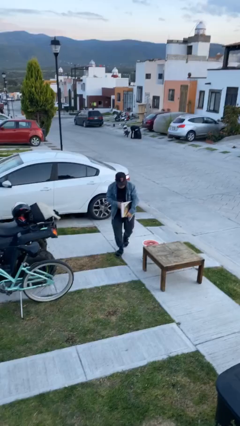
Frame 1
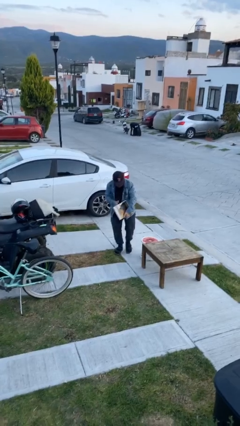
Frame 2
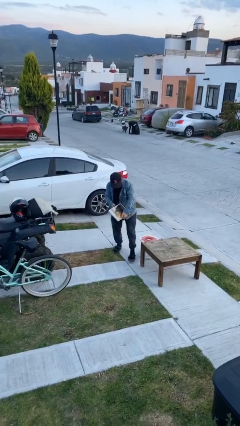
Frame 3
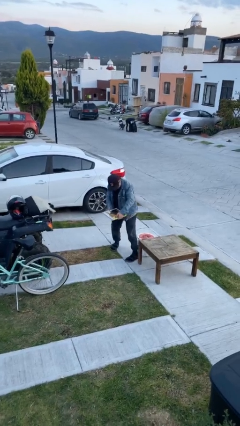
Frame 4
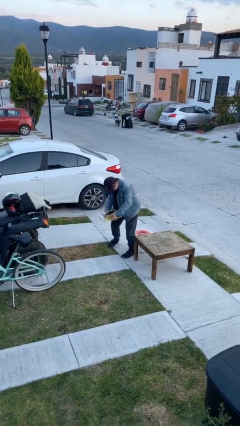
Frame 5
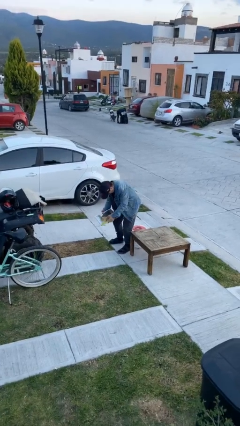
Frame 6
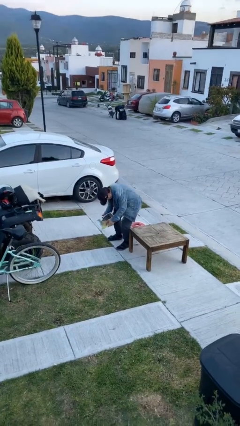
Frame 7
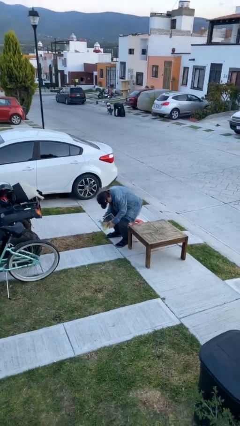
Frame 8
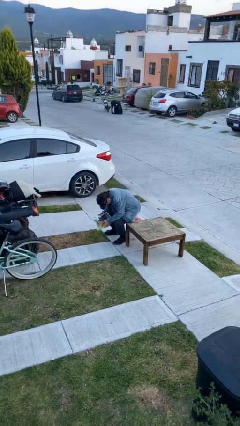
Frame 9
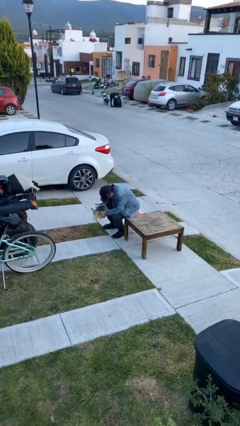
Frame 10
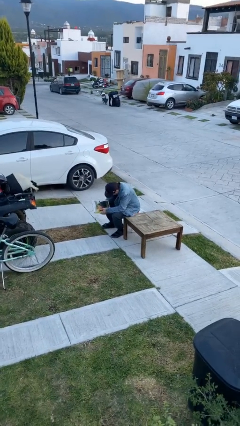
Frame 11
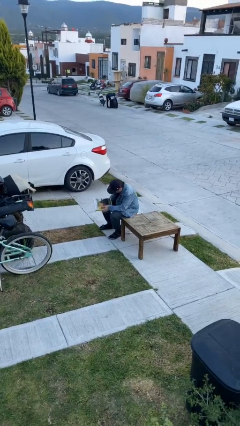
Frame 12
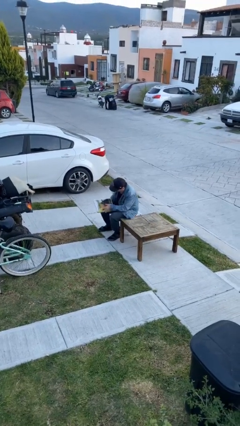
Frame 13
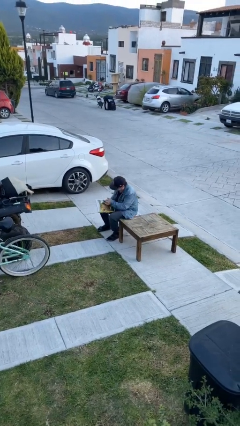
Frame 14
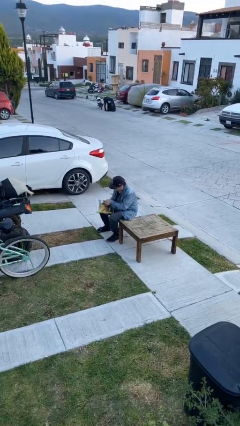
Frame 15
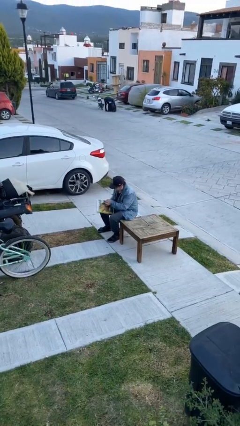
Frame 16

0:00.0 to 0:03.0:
person sits down

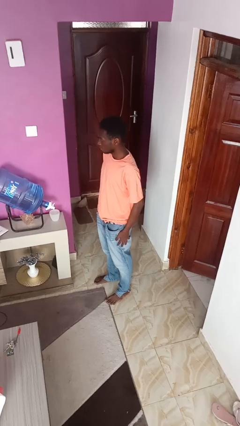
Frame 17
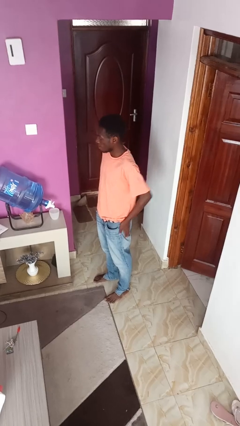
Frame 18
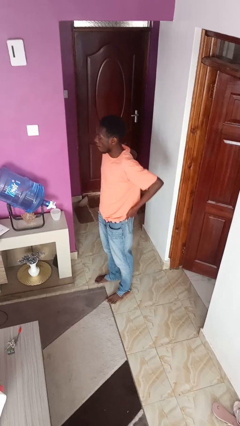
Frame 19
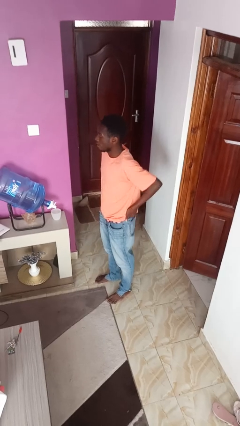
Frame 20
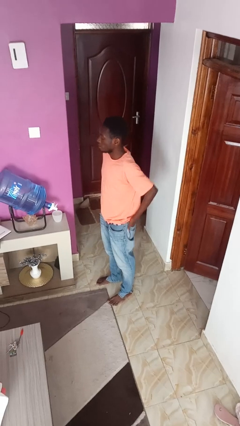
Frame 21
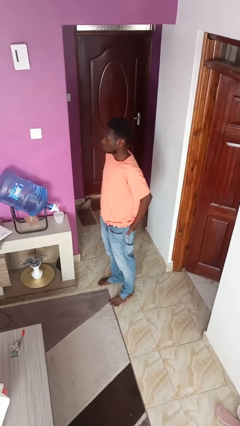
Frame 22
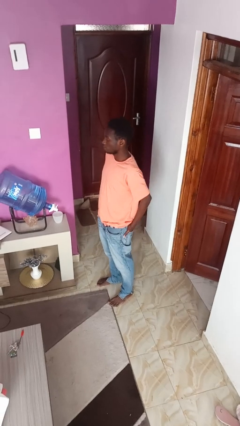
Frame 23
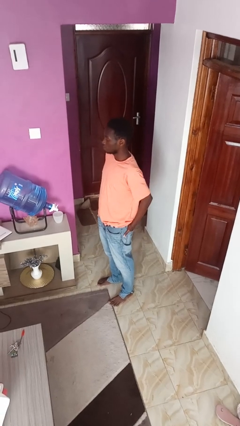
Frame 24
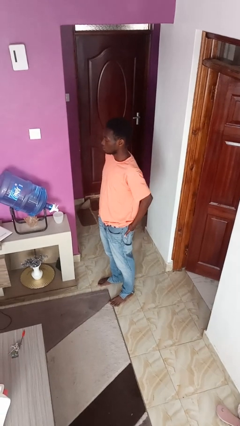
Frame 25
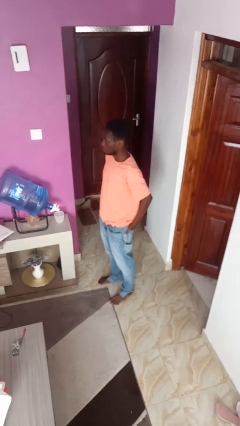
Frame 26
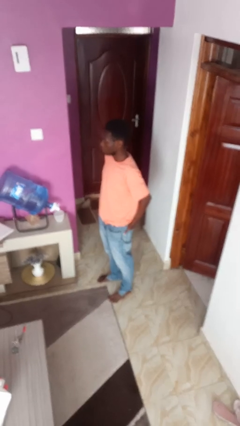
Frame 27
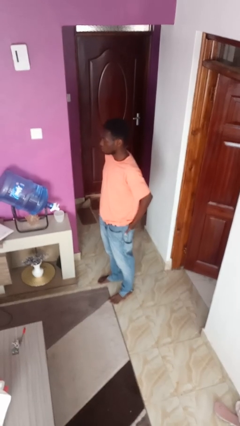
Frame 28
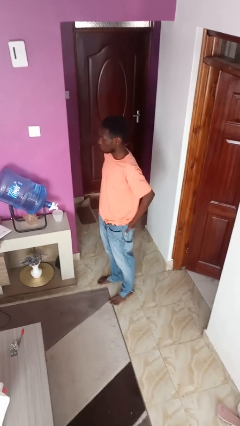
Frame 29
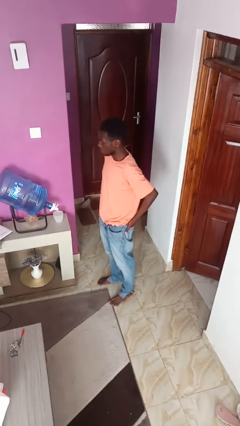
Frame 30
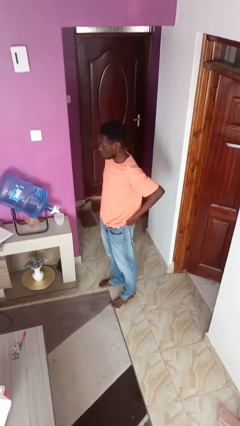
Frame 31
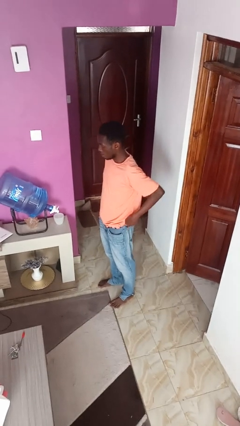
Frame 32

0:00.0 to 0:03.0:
person puts hands in back pockets

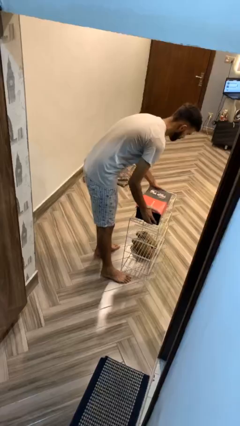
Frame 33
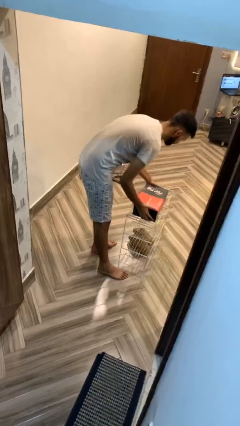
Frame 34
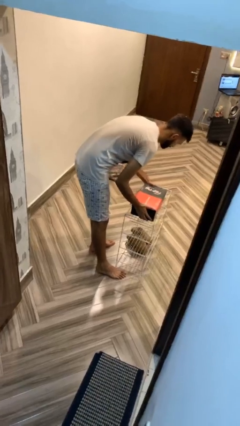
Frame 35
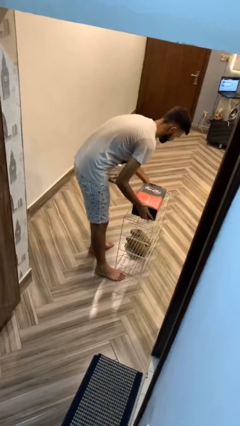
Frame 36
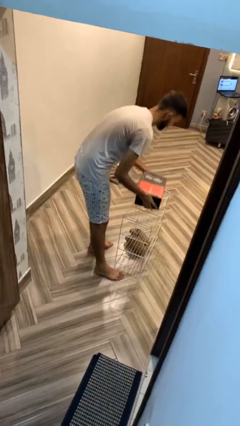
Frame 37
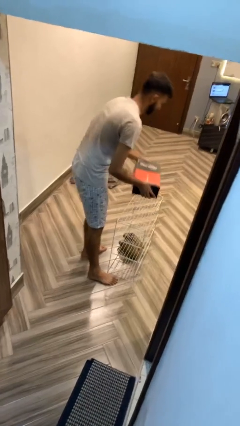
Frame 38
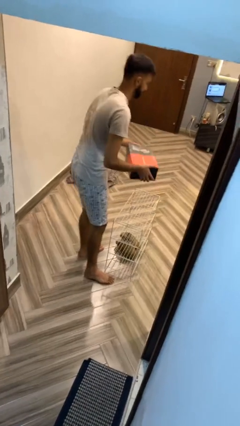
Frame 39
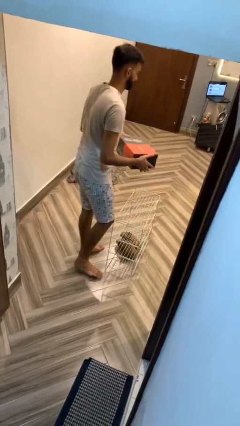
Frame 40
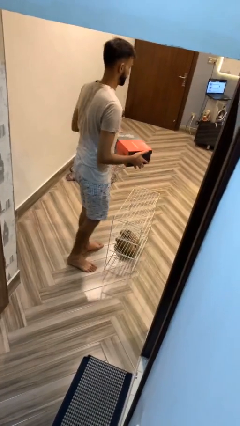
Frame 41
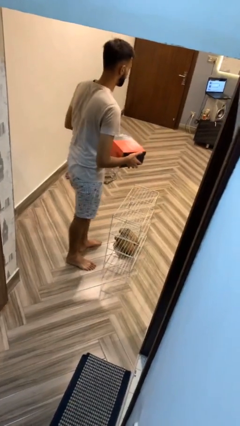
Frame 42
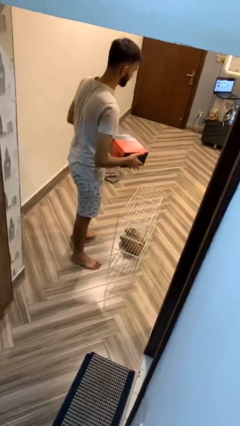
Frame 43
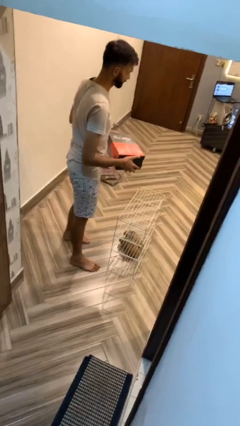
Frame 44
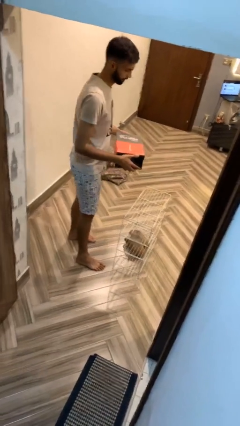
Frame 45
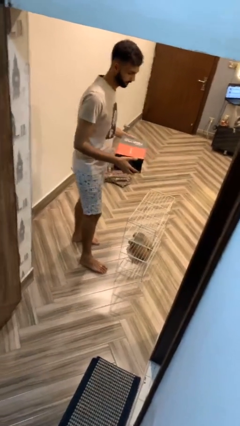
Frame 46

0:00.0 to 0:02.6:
person picks up object from table

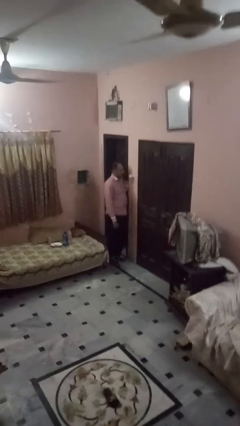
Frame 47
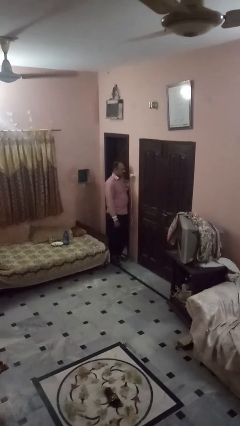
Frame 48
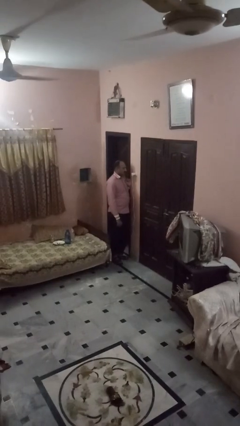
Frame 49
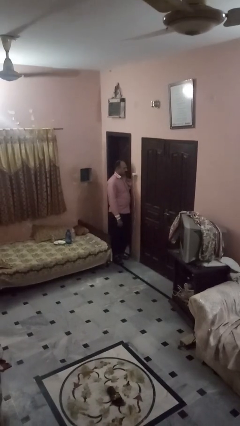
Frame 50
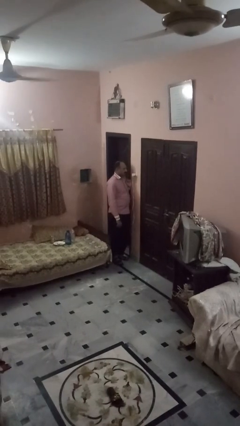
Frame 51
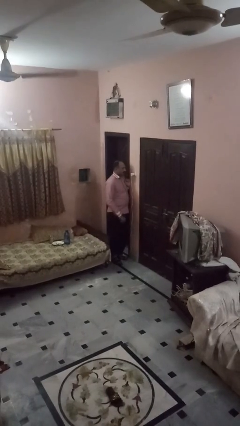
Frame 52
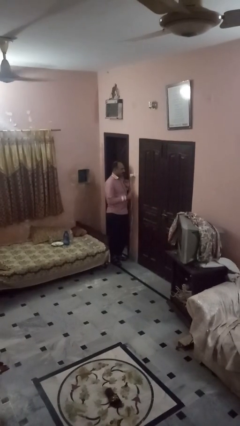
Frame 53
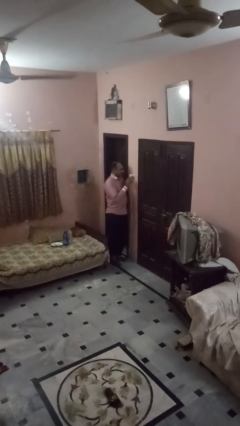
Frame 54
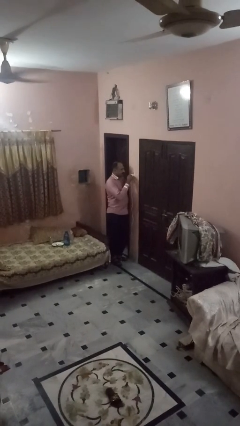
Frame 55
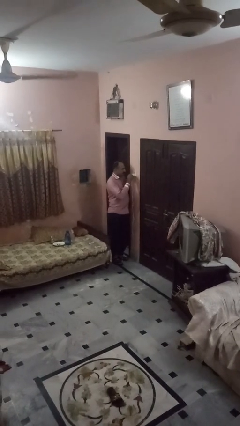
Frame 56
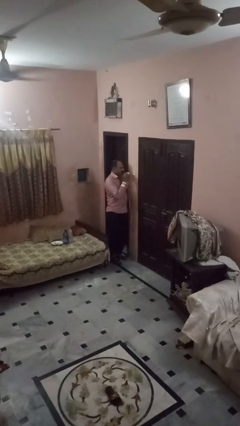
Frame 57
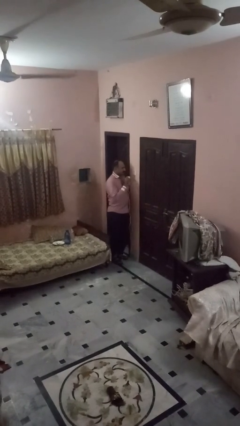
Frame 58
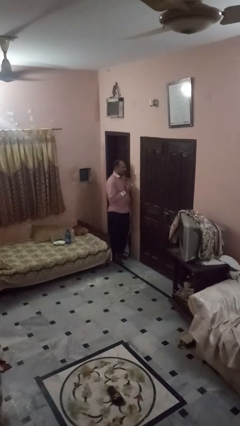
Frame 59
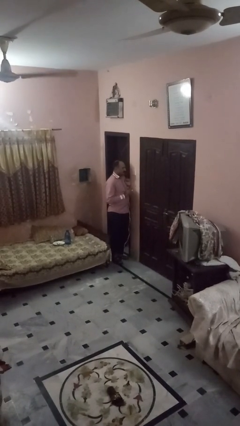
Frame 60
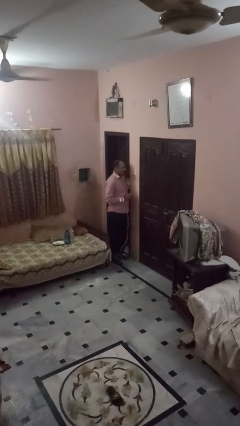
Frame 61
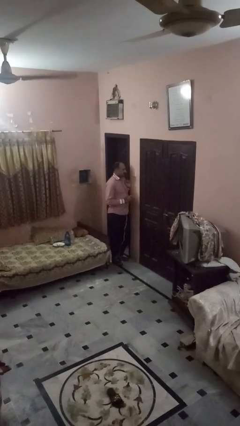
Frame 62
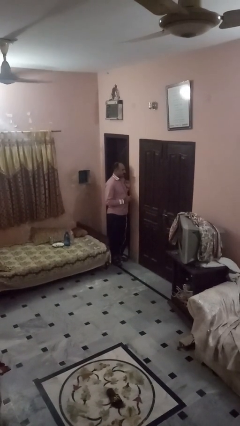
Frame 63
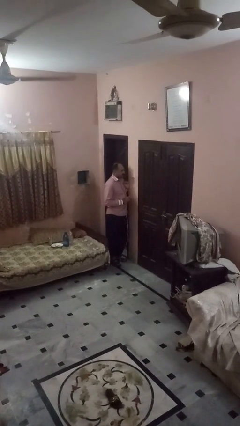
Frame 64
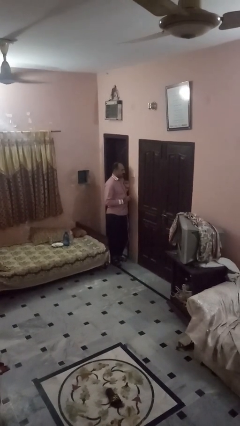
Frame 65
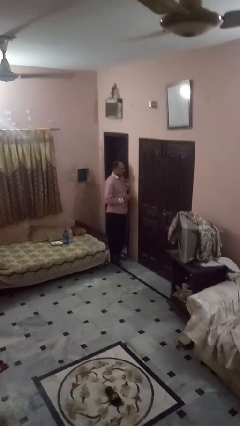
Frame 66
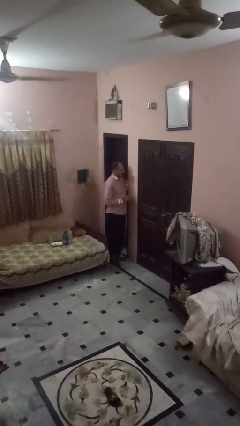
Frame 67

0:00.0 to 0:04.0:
person unplugs from electrical socket

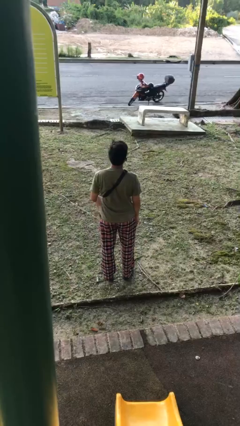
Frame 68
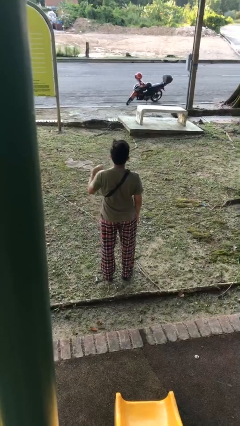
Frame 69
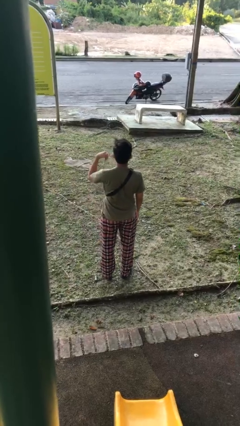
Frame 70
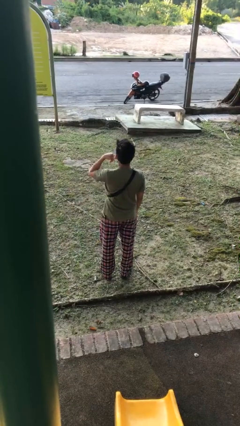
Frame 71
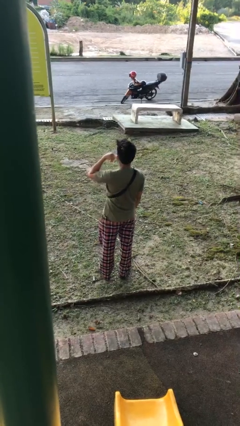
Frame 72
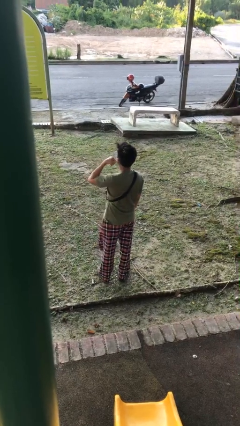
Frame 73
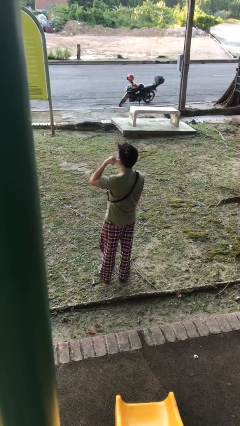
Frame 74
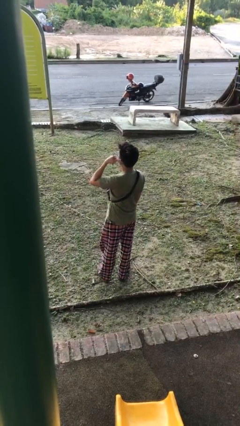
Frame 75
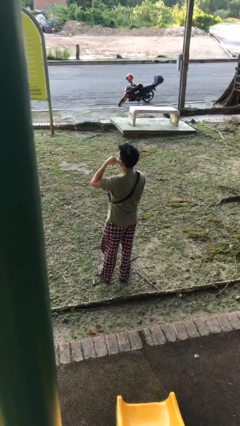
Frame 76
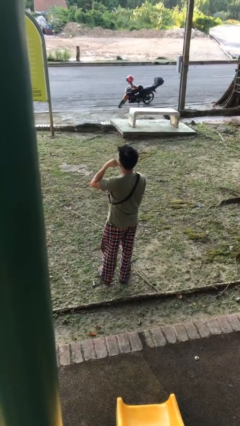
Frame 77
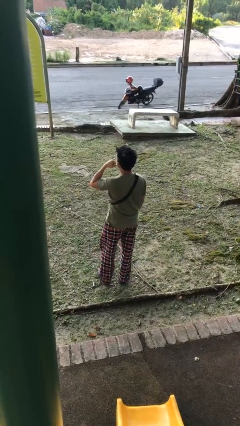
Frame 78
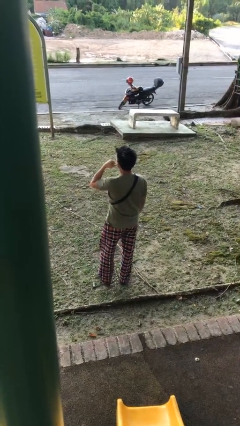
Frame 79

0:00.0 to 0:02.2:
person gestures call me

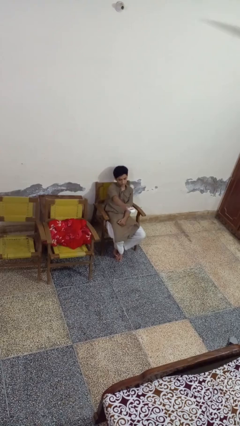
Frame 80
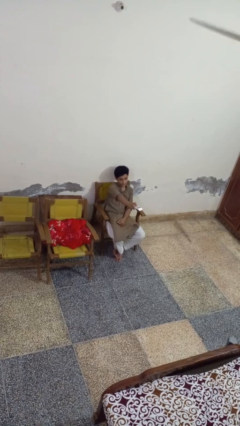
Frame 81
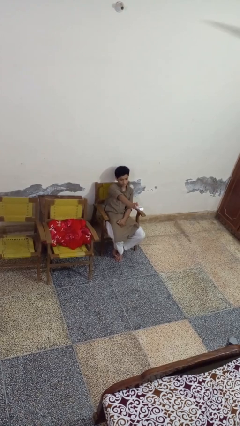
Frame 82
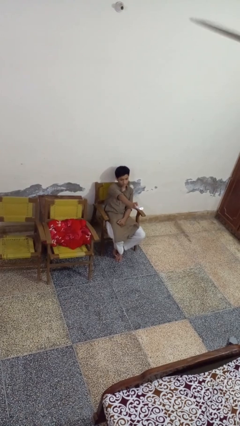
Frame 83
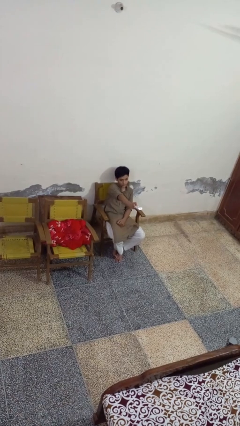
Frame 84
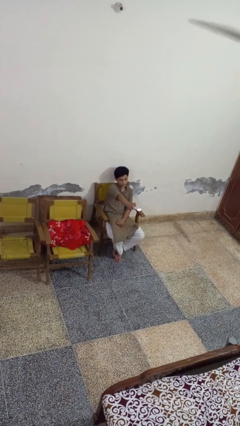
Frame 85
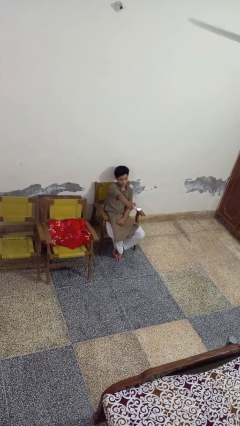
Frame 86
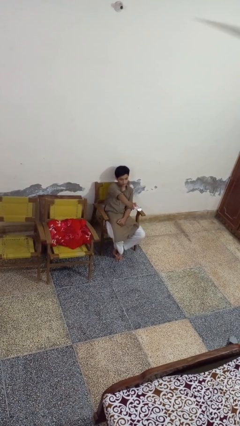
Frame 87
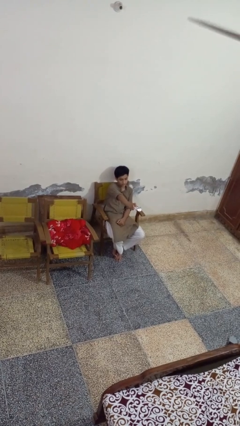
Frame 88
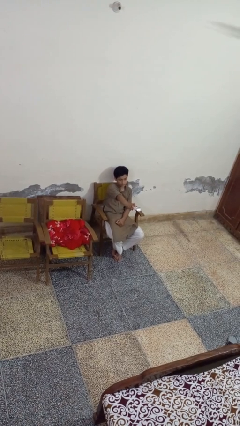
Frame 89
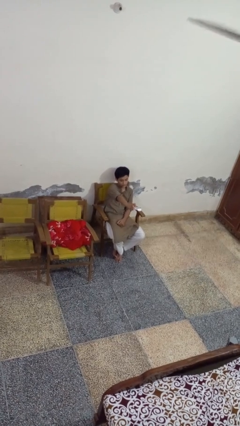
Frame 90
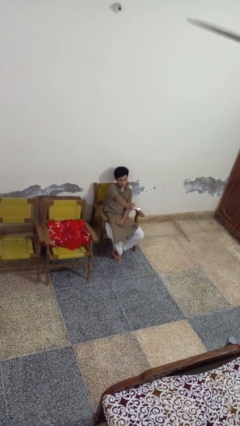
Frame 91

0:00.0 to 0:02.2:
person uses television remote
